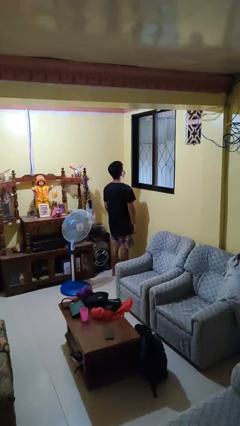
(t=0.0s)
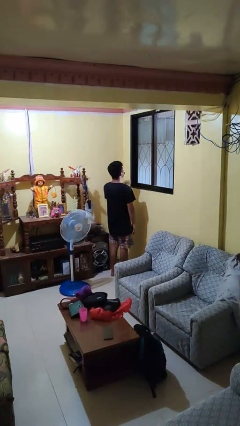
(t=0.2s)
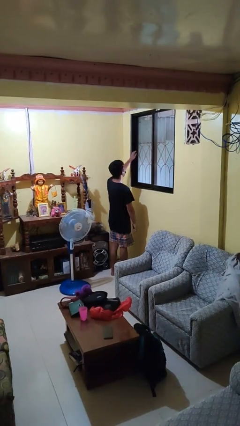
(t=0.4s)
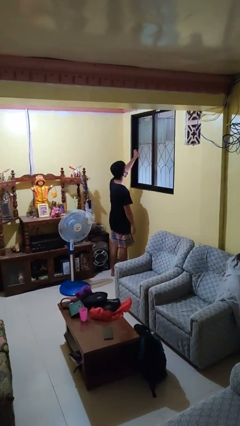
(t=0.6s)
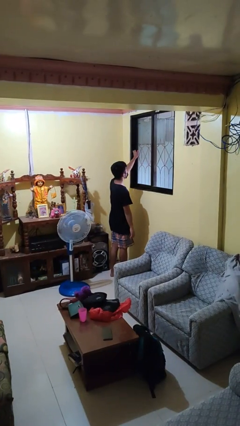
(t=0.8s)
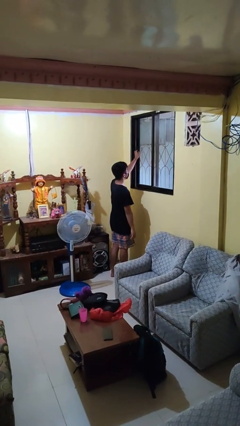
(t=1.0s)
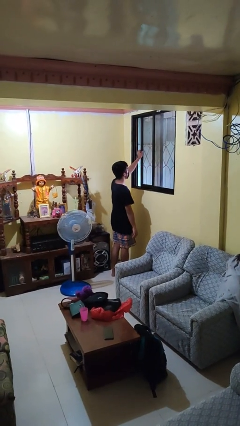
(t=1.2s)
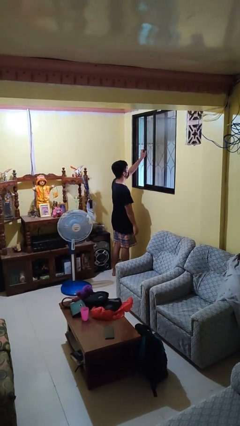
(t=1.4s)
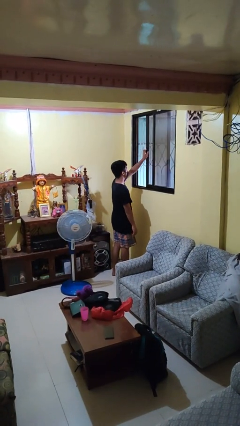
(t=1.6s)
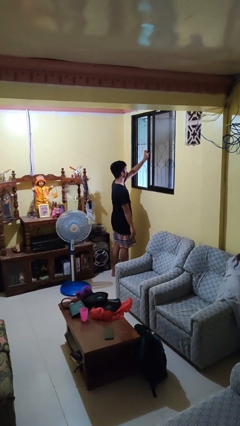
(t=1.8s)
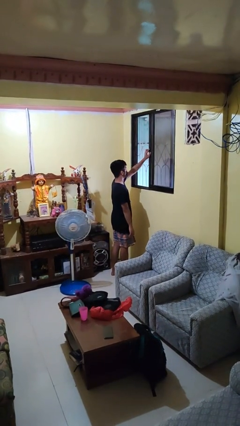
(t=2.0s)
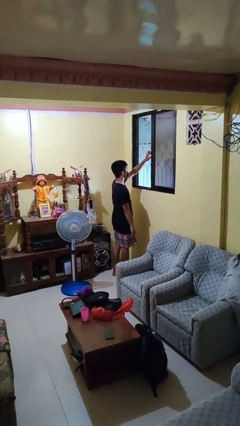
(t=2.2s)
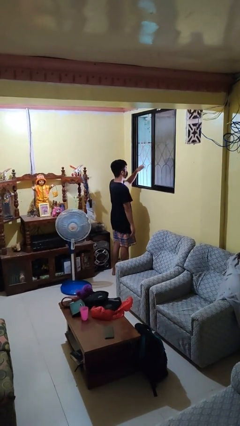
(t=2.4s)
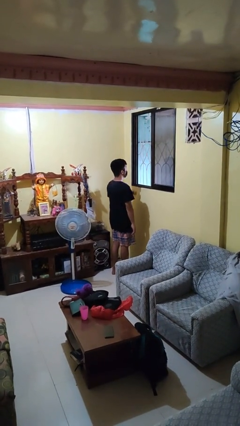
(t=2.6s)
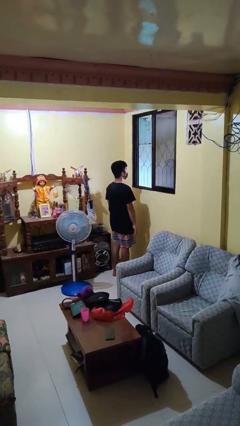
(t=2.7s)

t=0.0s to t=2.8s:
person opens home window

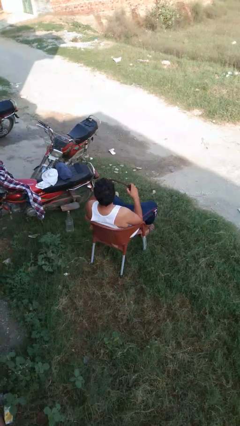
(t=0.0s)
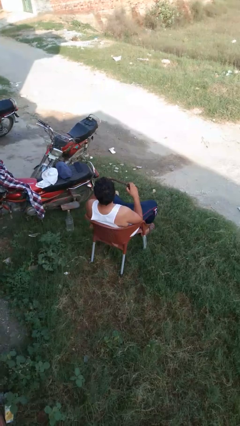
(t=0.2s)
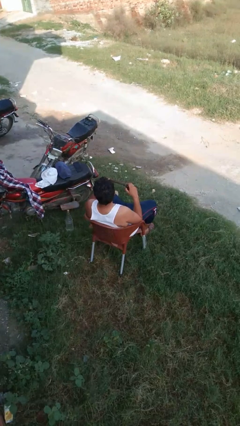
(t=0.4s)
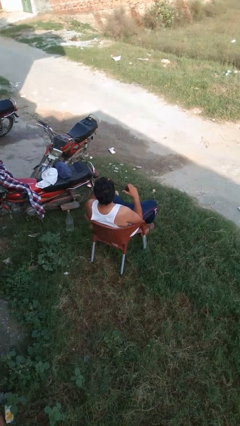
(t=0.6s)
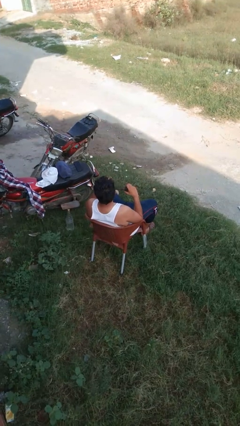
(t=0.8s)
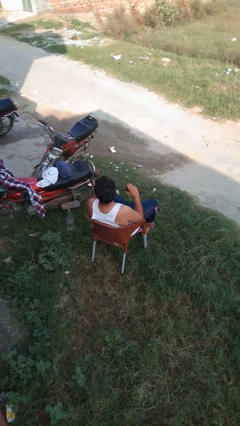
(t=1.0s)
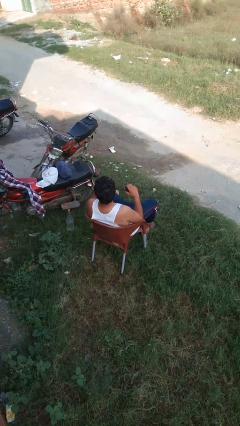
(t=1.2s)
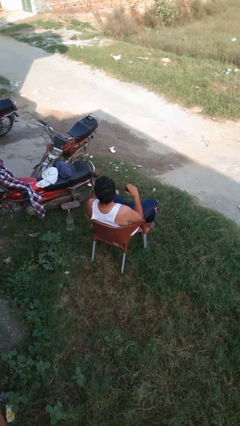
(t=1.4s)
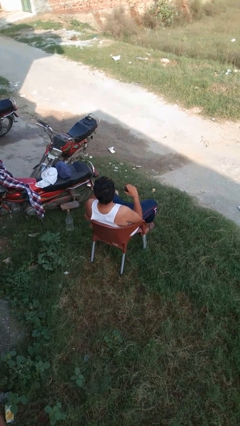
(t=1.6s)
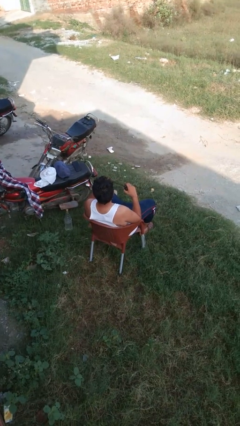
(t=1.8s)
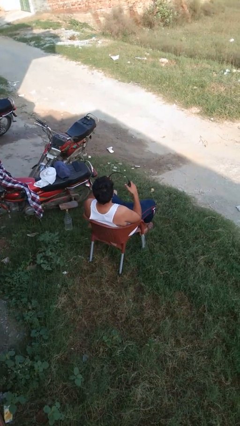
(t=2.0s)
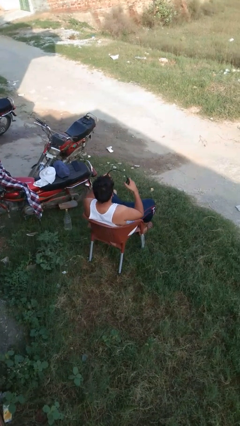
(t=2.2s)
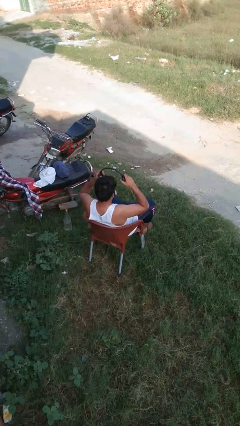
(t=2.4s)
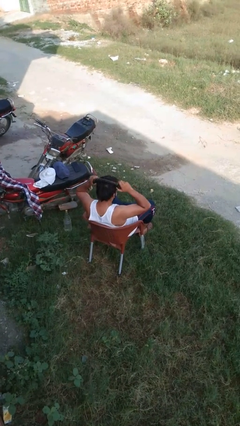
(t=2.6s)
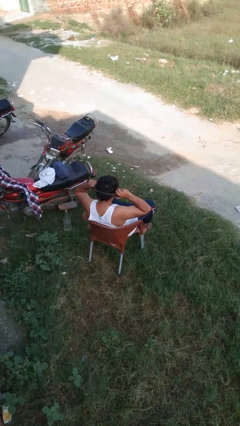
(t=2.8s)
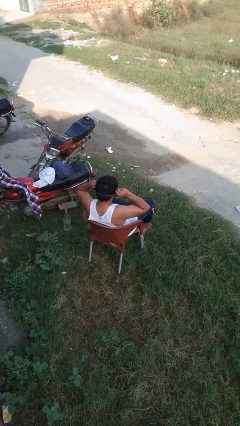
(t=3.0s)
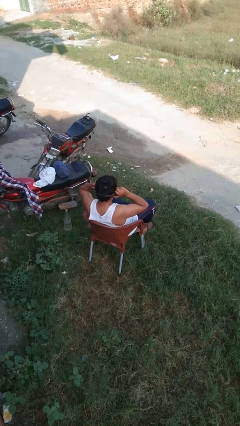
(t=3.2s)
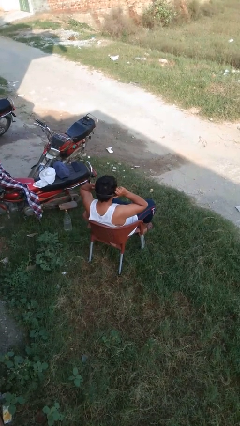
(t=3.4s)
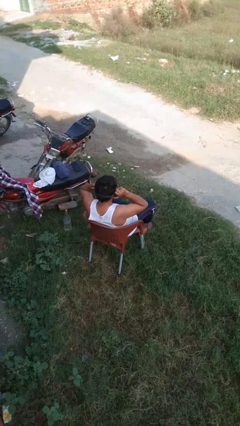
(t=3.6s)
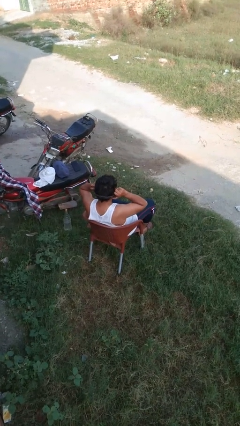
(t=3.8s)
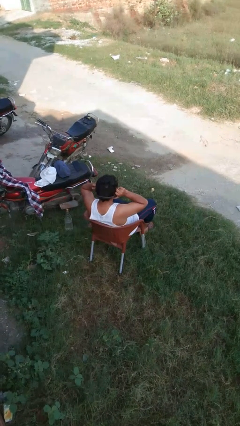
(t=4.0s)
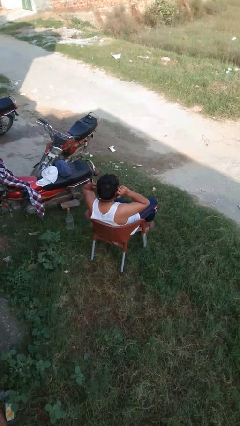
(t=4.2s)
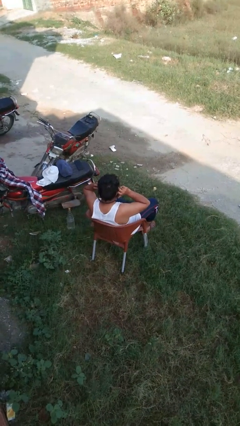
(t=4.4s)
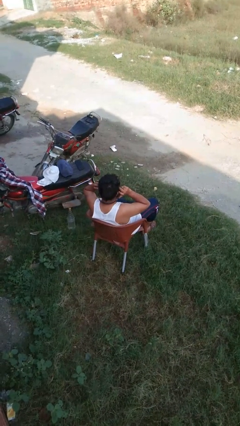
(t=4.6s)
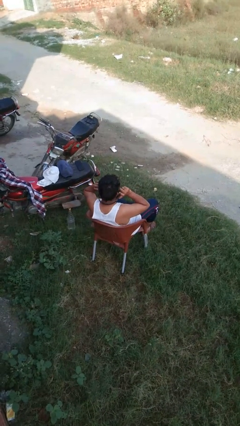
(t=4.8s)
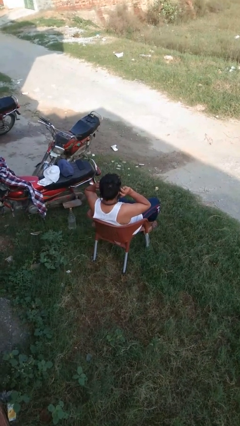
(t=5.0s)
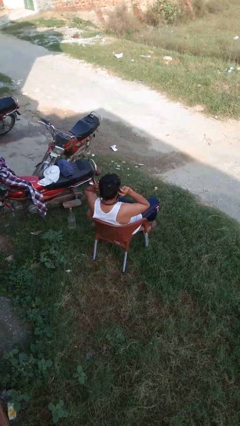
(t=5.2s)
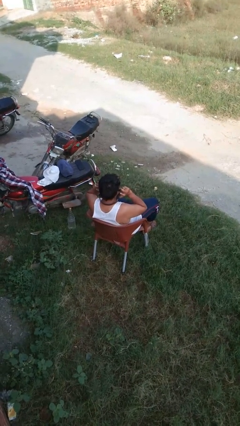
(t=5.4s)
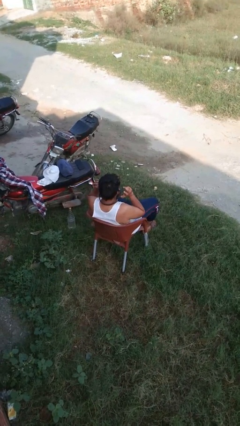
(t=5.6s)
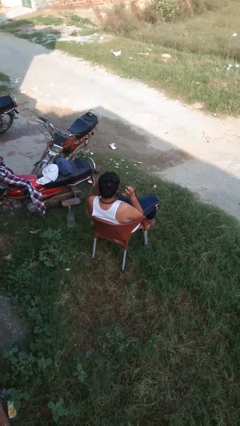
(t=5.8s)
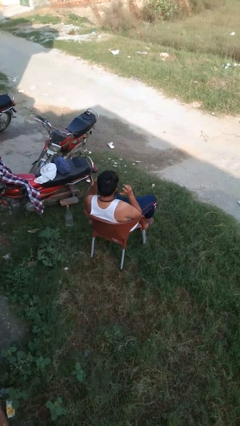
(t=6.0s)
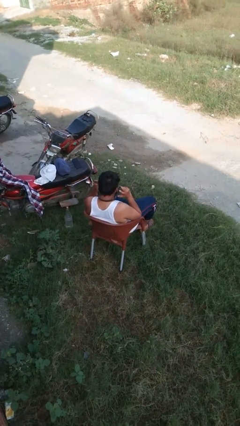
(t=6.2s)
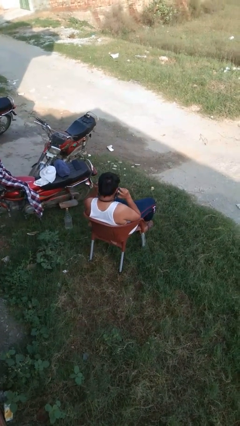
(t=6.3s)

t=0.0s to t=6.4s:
person puts on headphones

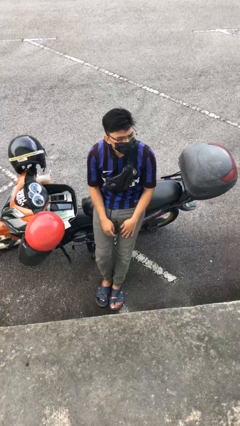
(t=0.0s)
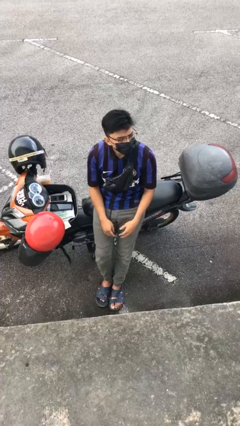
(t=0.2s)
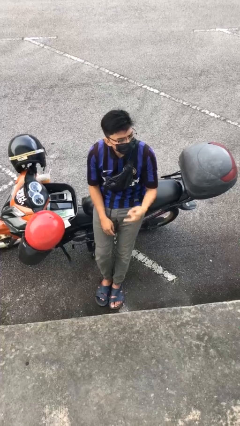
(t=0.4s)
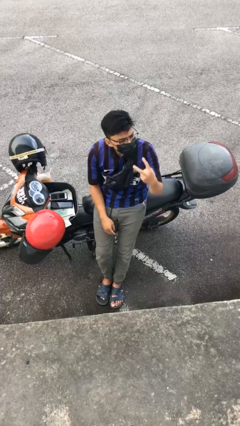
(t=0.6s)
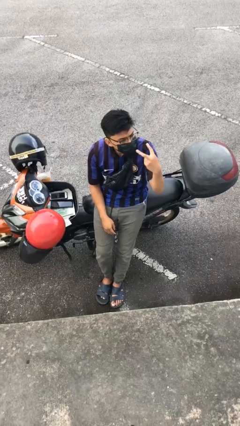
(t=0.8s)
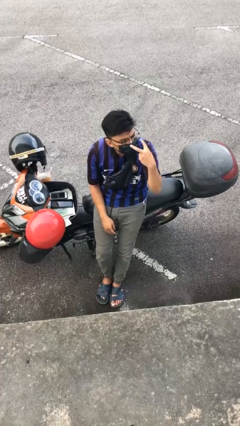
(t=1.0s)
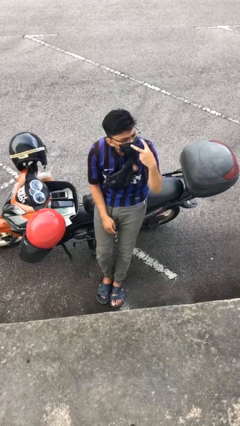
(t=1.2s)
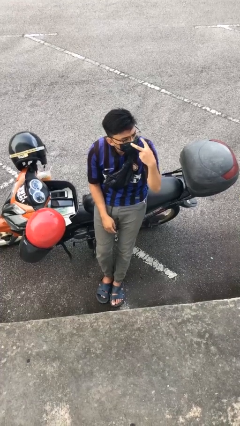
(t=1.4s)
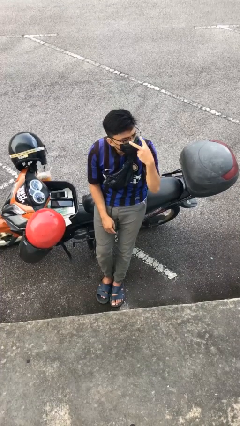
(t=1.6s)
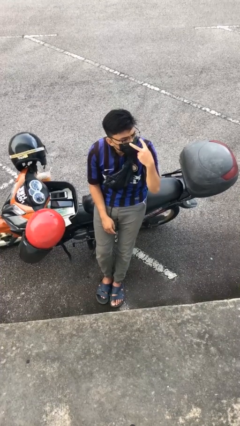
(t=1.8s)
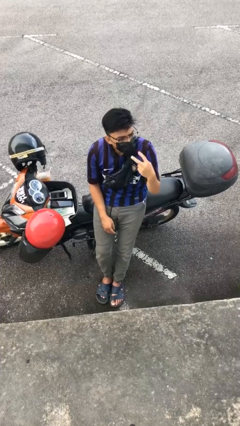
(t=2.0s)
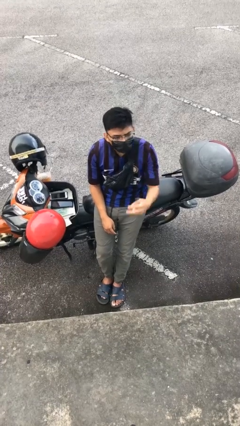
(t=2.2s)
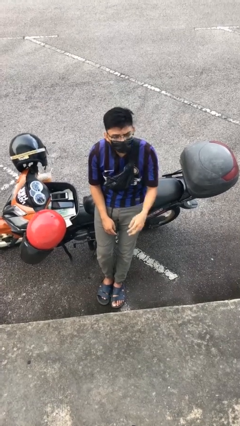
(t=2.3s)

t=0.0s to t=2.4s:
person gestures watch closely

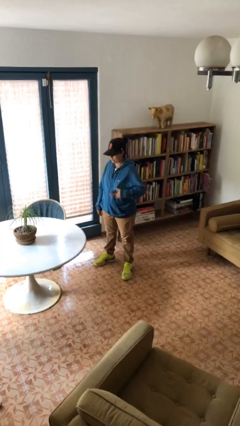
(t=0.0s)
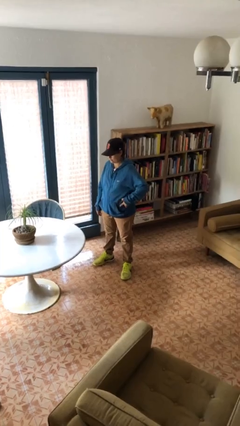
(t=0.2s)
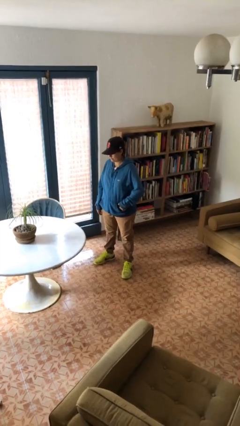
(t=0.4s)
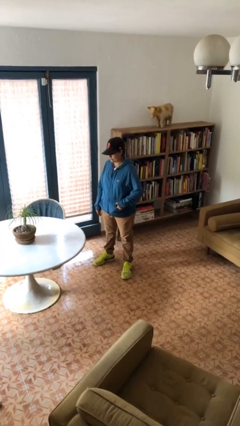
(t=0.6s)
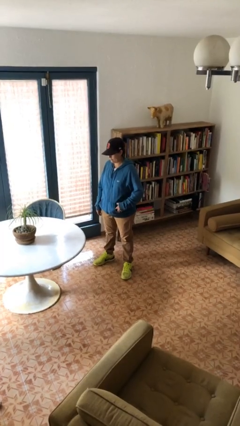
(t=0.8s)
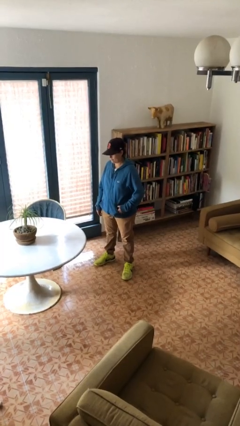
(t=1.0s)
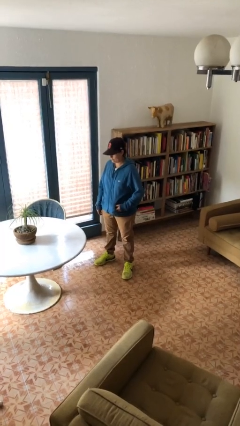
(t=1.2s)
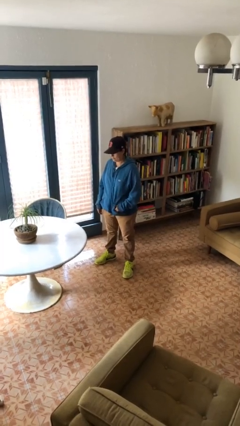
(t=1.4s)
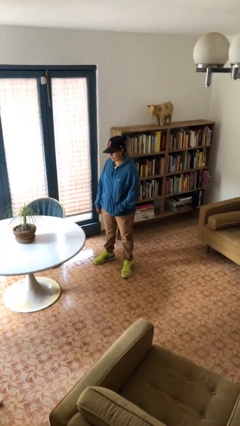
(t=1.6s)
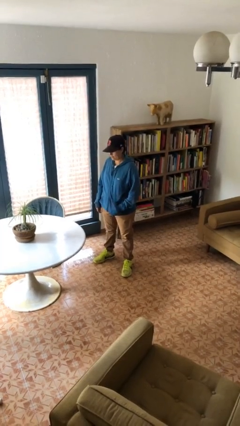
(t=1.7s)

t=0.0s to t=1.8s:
person puts phone into pocket

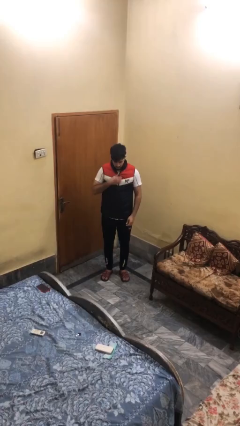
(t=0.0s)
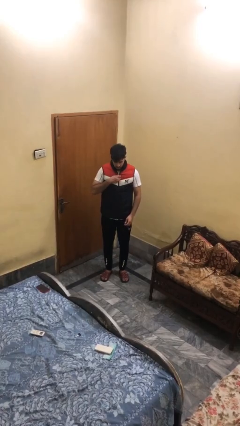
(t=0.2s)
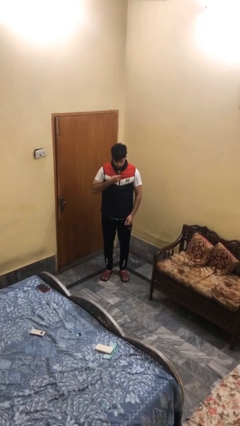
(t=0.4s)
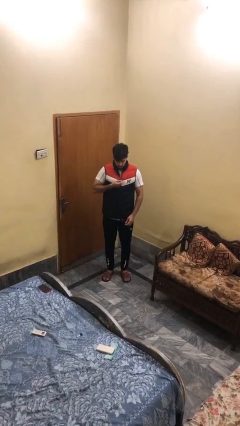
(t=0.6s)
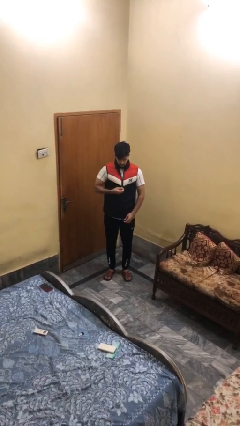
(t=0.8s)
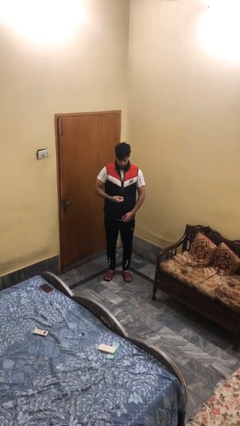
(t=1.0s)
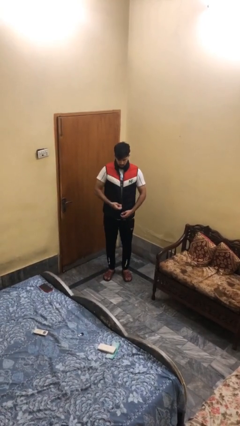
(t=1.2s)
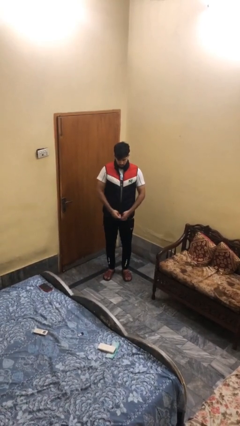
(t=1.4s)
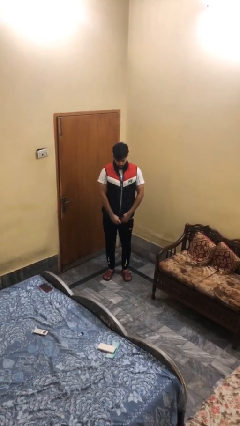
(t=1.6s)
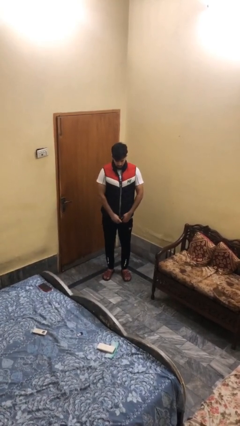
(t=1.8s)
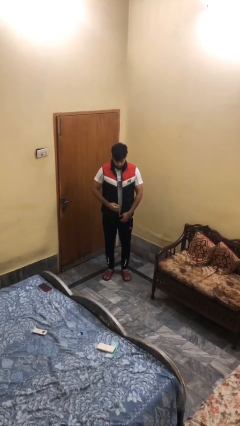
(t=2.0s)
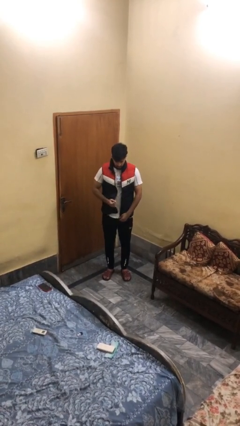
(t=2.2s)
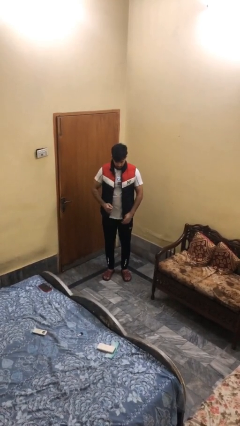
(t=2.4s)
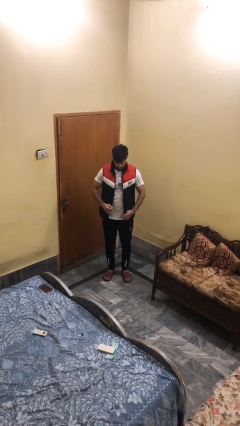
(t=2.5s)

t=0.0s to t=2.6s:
person unzips jacket

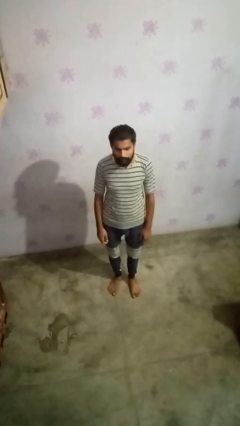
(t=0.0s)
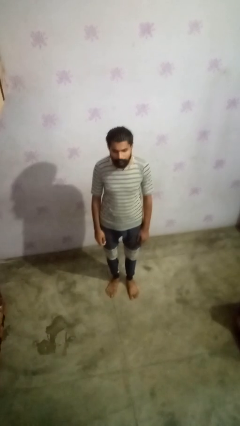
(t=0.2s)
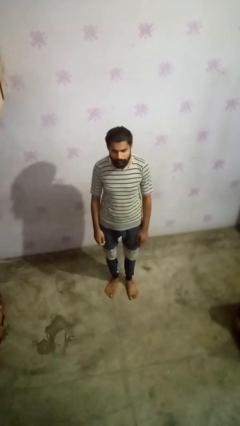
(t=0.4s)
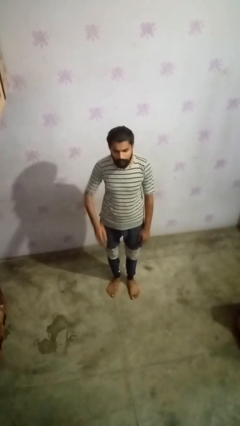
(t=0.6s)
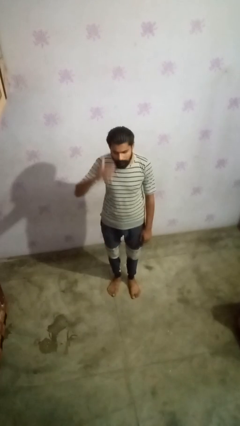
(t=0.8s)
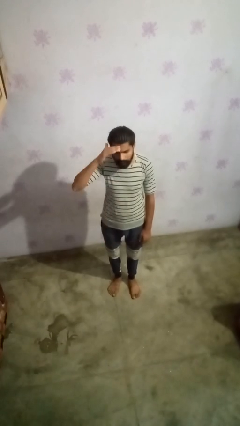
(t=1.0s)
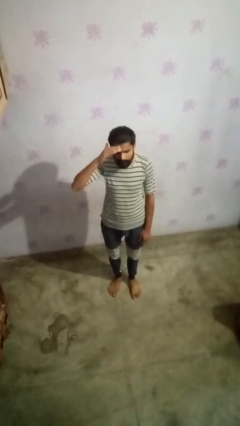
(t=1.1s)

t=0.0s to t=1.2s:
person salutes
